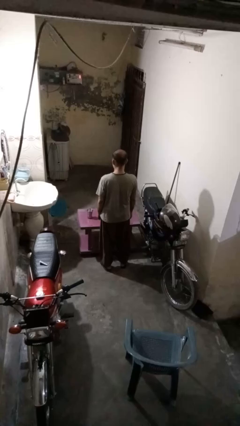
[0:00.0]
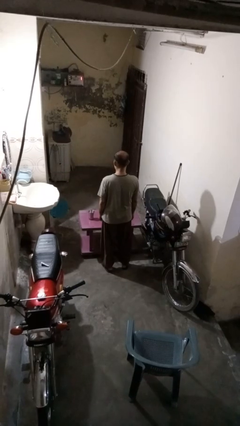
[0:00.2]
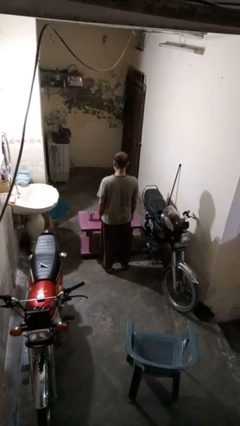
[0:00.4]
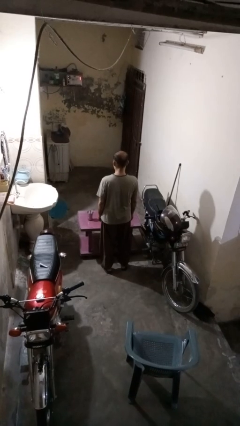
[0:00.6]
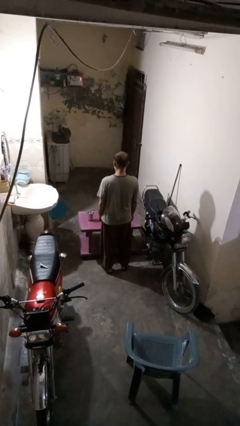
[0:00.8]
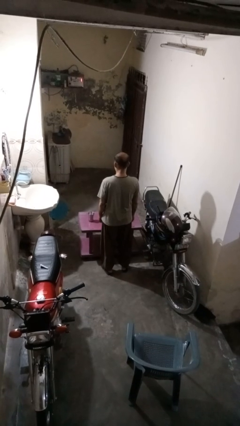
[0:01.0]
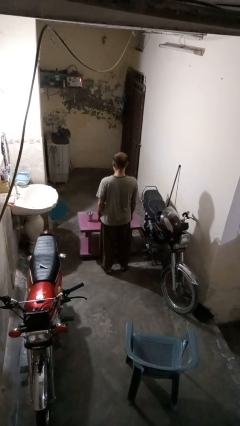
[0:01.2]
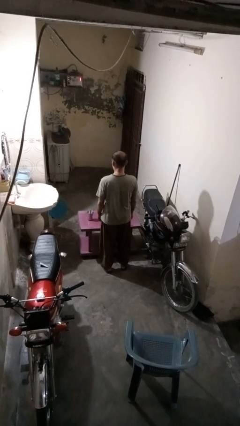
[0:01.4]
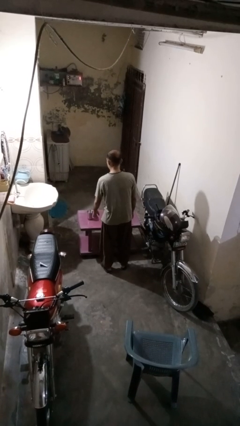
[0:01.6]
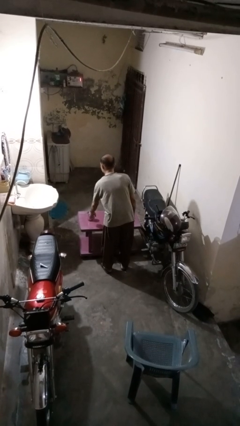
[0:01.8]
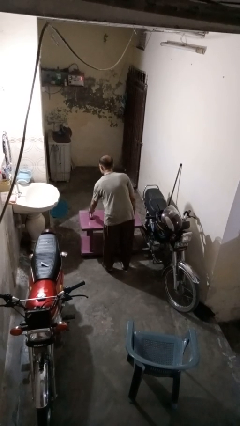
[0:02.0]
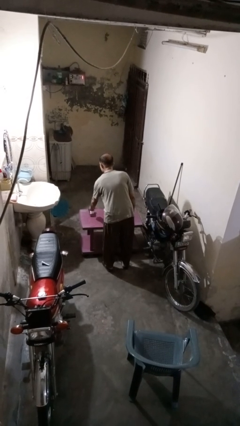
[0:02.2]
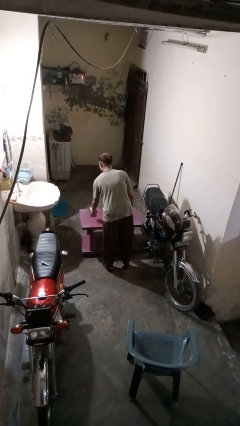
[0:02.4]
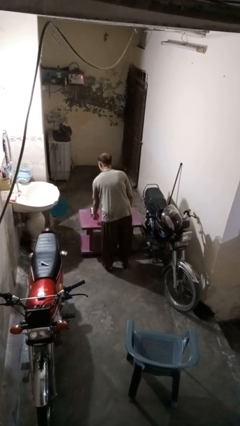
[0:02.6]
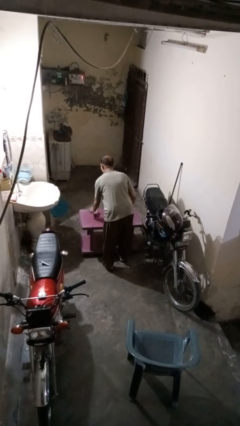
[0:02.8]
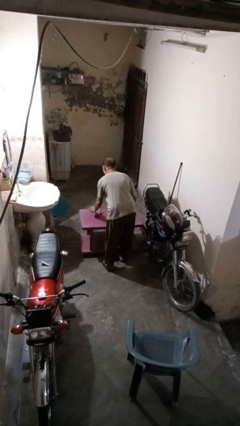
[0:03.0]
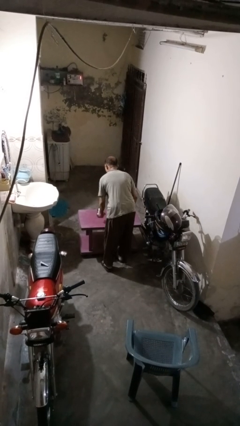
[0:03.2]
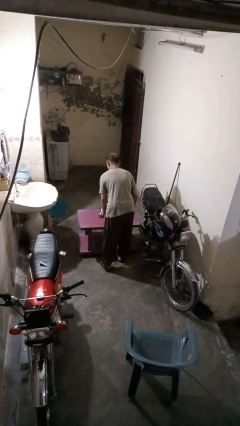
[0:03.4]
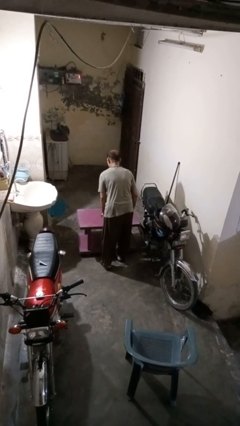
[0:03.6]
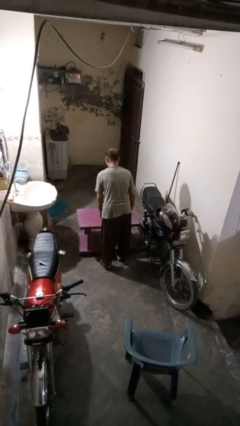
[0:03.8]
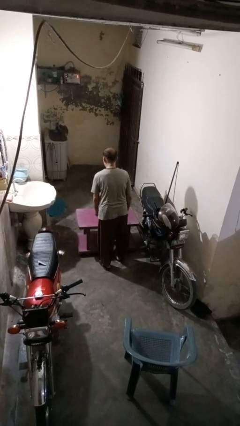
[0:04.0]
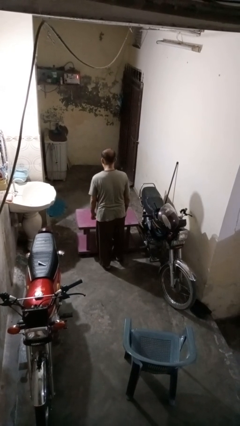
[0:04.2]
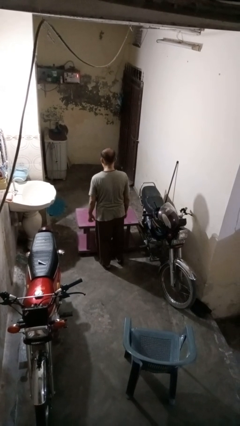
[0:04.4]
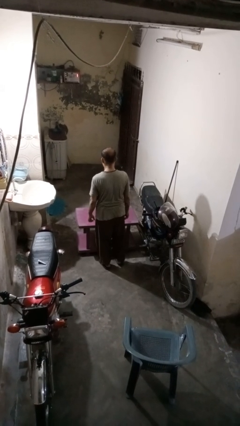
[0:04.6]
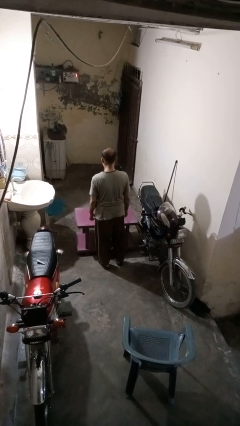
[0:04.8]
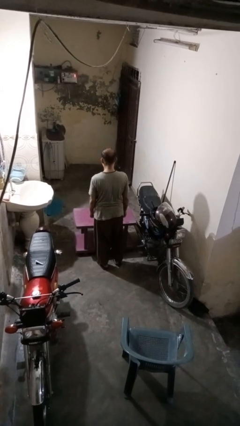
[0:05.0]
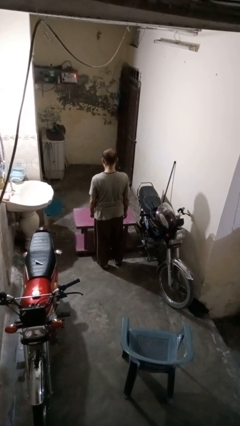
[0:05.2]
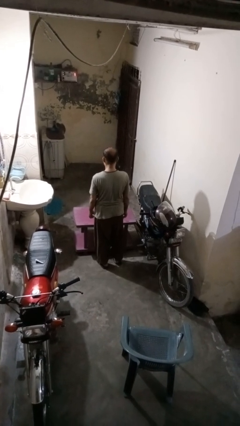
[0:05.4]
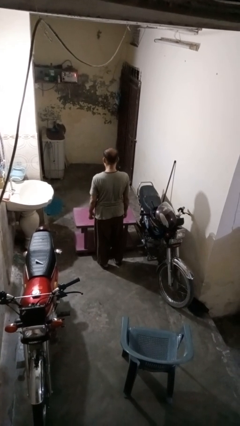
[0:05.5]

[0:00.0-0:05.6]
person spills on table

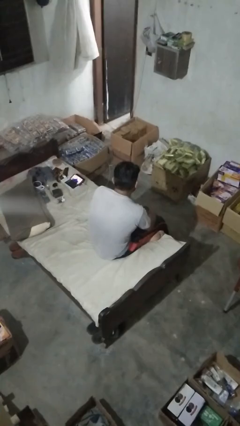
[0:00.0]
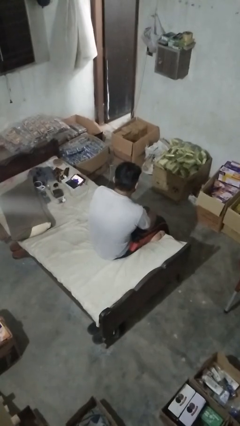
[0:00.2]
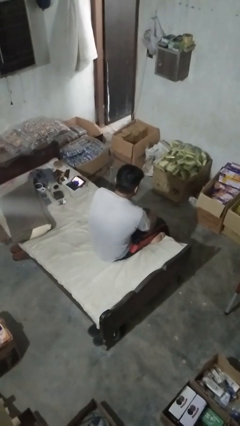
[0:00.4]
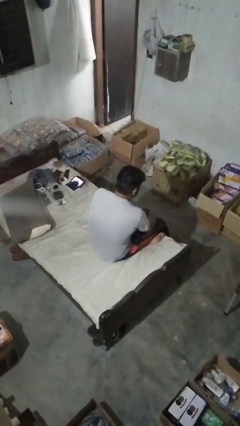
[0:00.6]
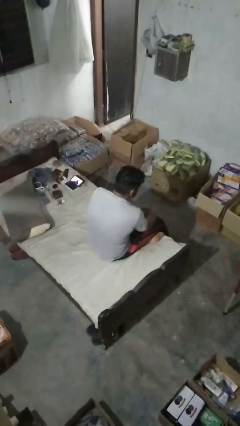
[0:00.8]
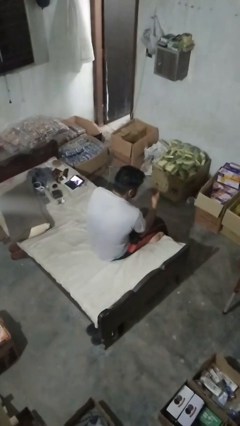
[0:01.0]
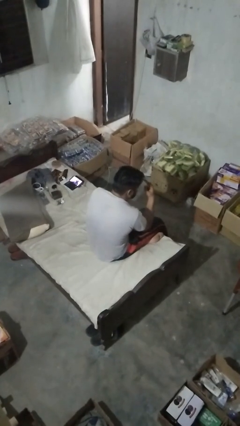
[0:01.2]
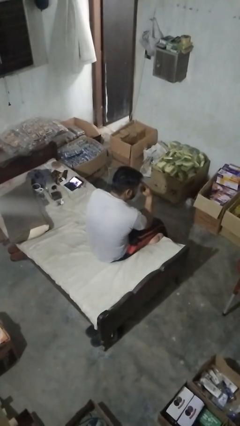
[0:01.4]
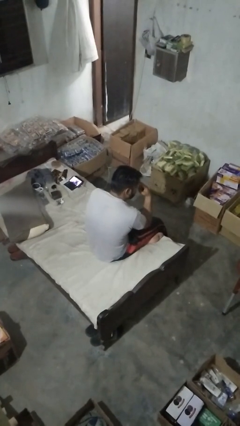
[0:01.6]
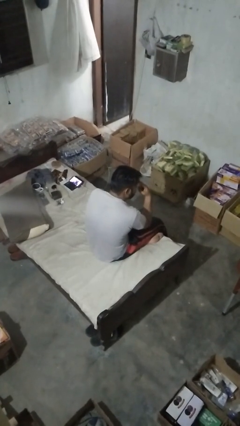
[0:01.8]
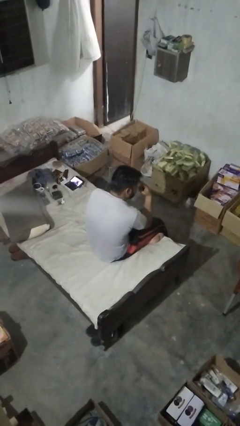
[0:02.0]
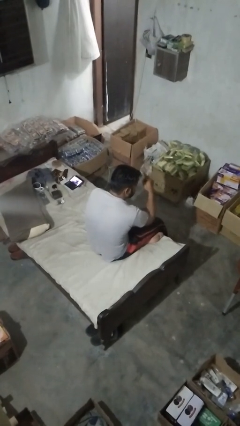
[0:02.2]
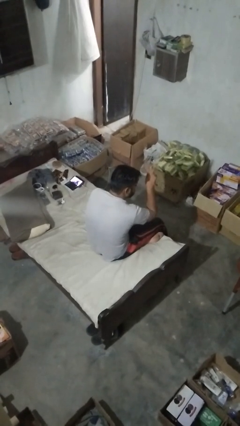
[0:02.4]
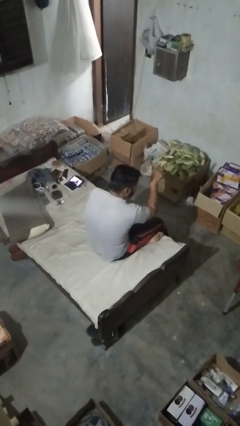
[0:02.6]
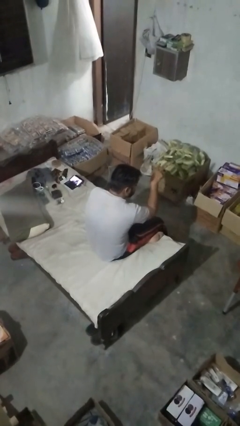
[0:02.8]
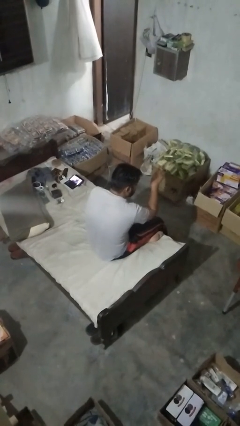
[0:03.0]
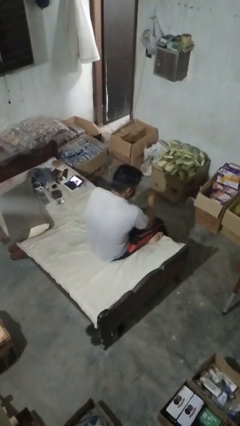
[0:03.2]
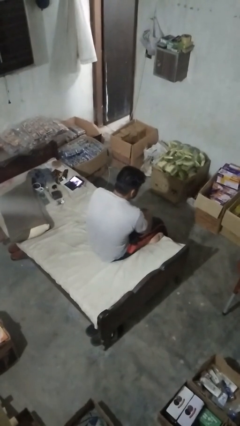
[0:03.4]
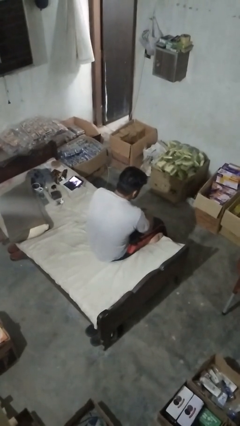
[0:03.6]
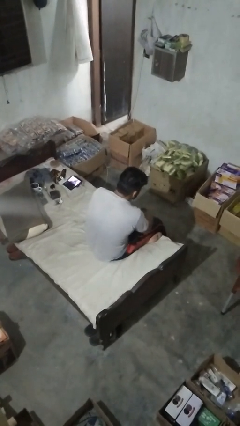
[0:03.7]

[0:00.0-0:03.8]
person gestures watch closely

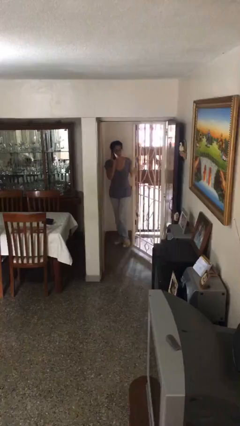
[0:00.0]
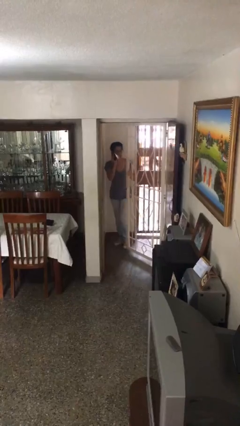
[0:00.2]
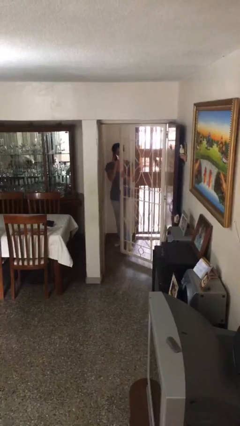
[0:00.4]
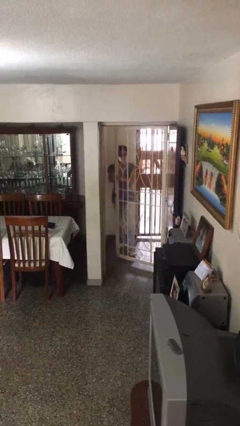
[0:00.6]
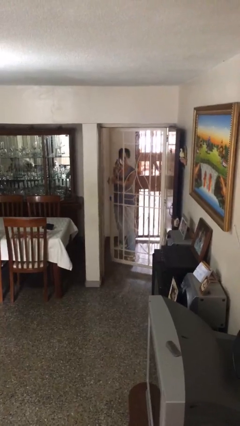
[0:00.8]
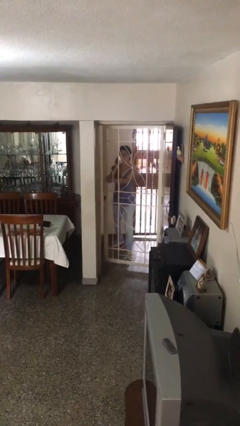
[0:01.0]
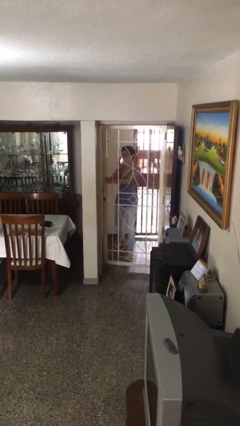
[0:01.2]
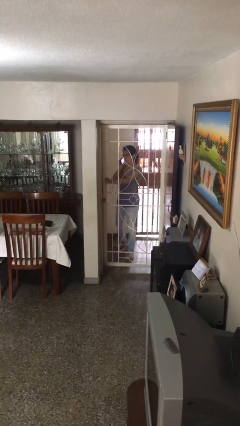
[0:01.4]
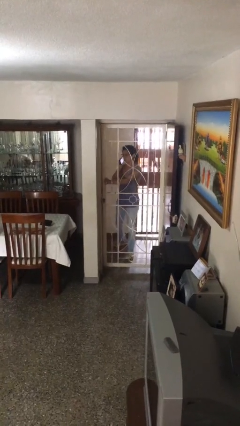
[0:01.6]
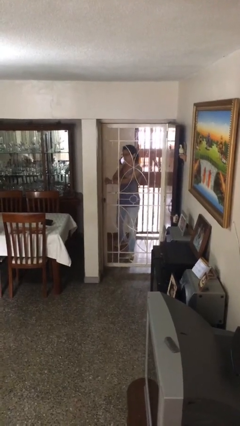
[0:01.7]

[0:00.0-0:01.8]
person closes facility door

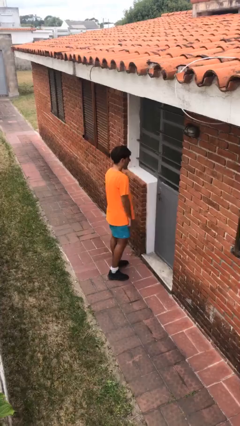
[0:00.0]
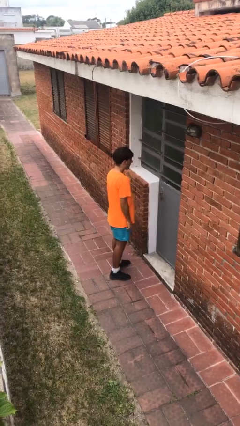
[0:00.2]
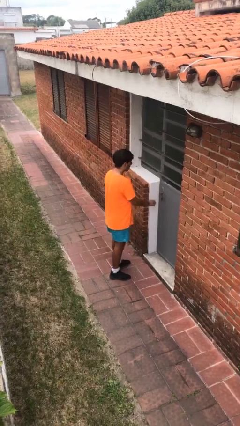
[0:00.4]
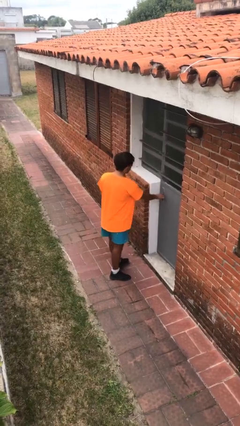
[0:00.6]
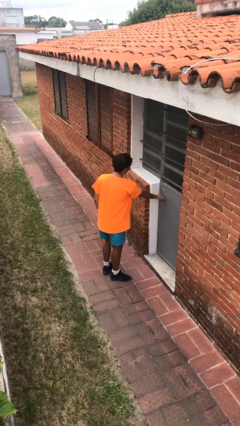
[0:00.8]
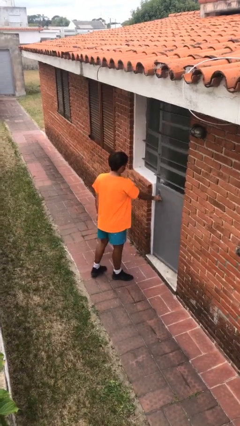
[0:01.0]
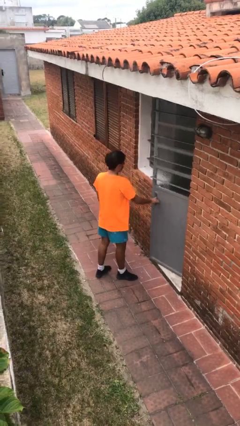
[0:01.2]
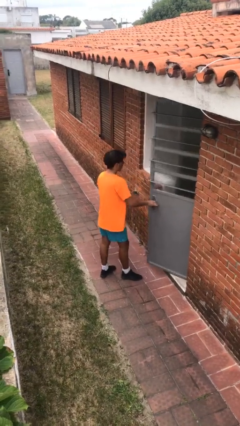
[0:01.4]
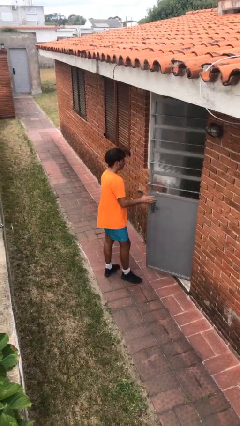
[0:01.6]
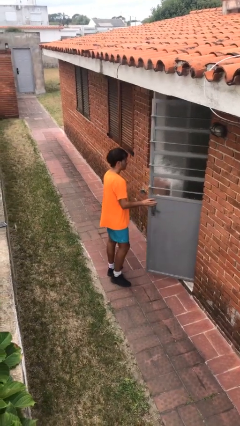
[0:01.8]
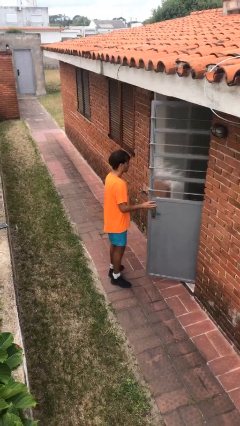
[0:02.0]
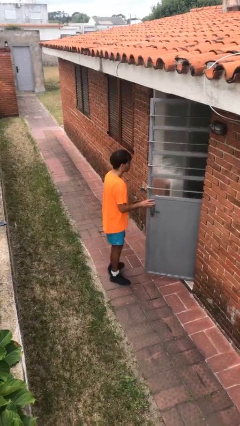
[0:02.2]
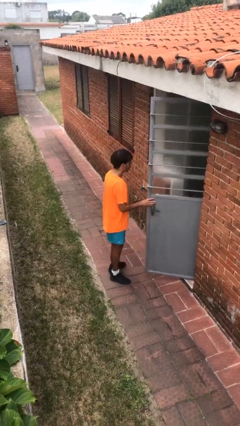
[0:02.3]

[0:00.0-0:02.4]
person opens facility door

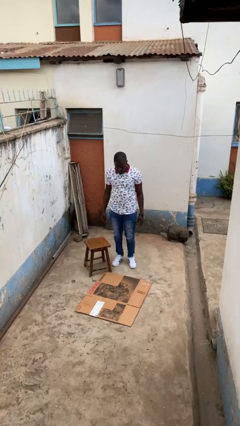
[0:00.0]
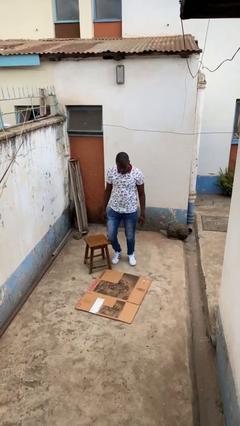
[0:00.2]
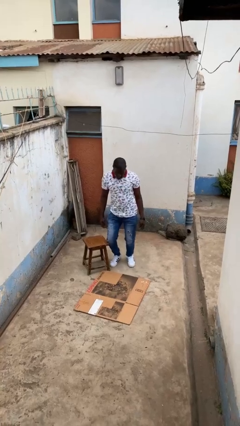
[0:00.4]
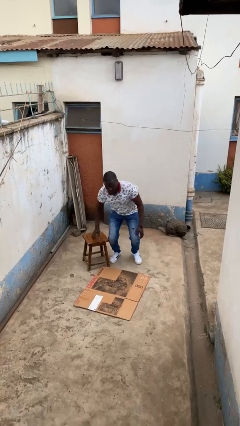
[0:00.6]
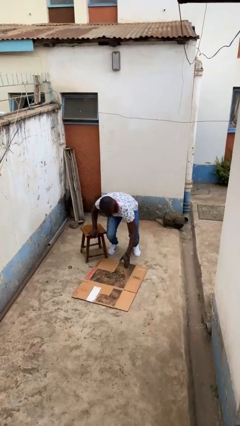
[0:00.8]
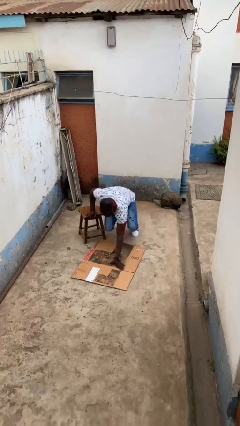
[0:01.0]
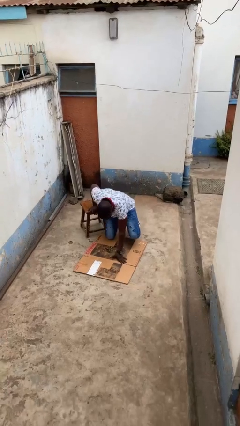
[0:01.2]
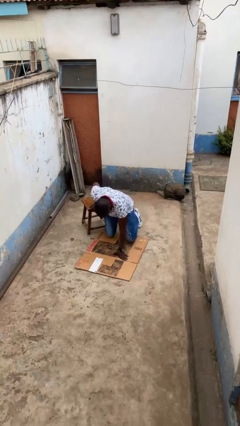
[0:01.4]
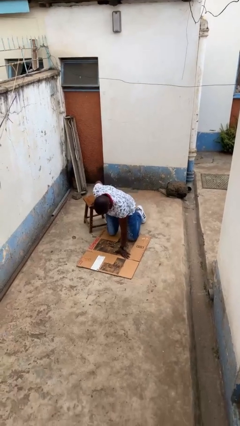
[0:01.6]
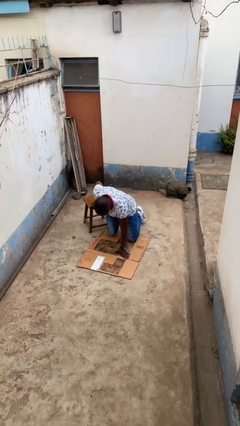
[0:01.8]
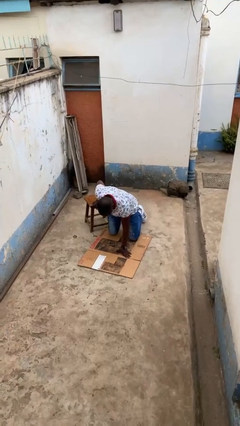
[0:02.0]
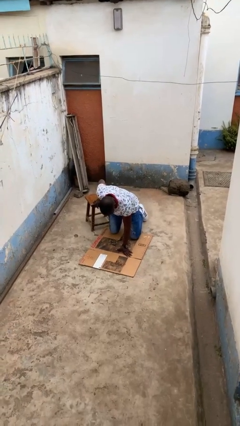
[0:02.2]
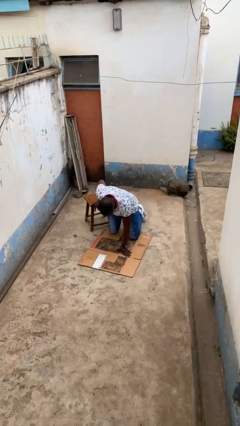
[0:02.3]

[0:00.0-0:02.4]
person trips on object on floor

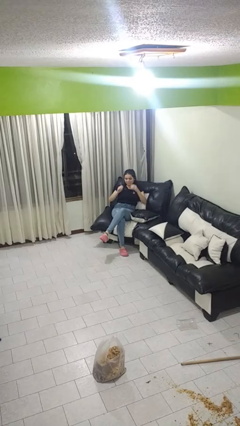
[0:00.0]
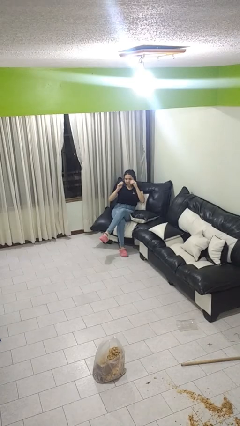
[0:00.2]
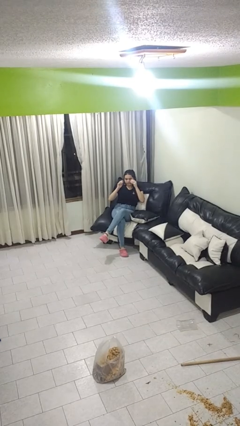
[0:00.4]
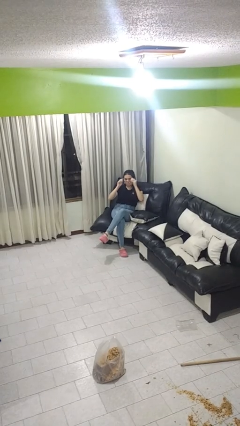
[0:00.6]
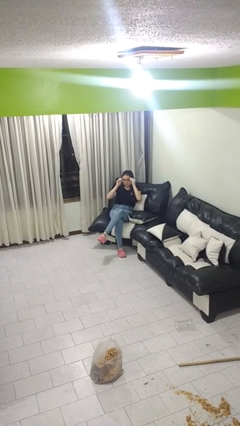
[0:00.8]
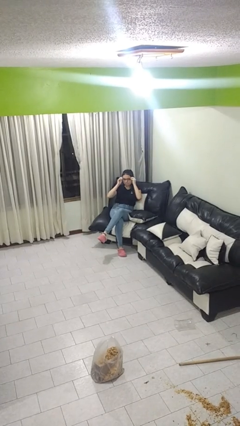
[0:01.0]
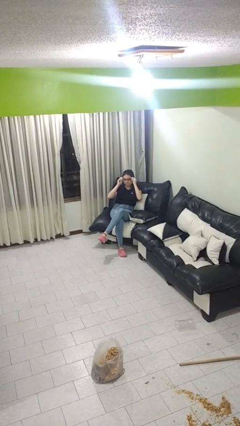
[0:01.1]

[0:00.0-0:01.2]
person puts on glasses

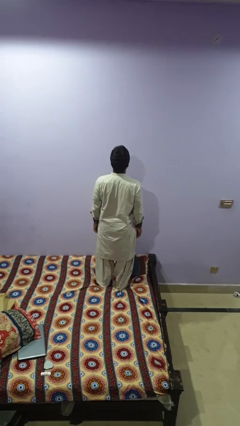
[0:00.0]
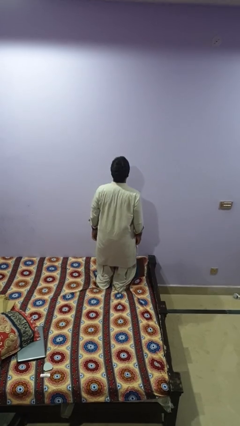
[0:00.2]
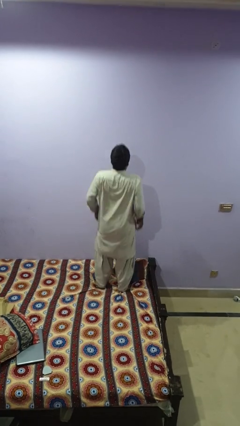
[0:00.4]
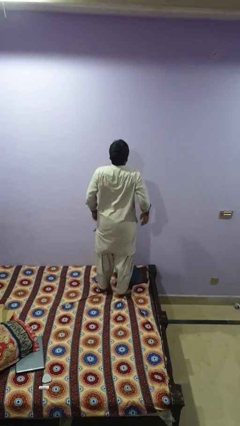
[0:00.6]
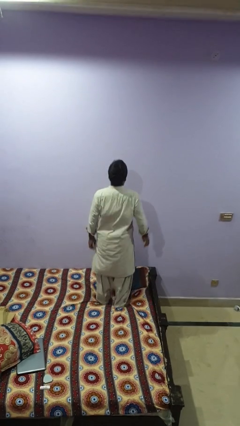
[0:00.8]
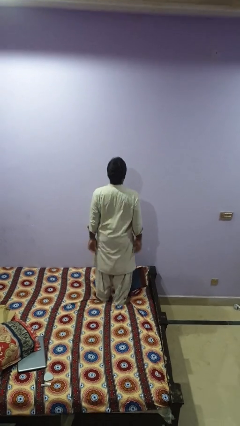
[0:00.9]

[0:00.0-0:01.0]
person jumps on bed
